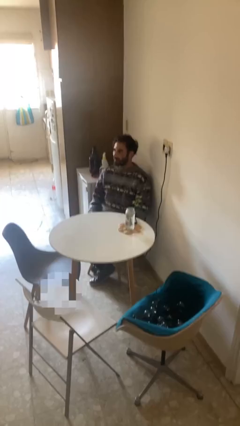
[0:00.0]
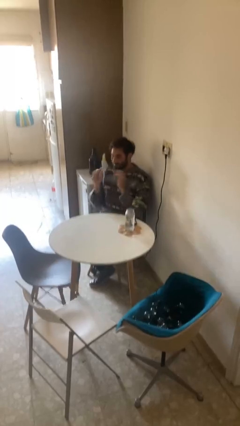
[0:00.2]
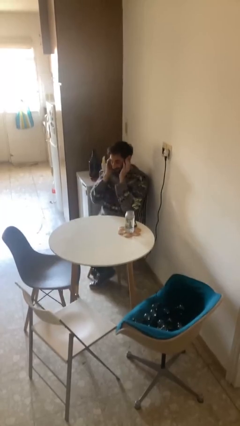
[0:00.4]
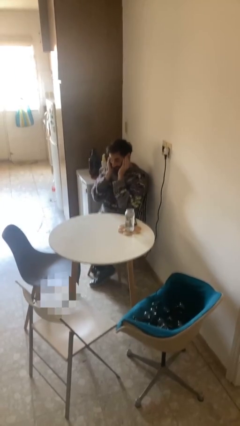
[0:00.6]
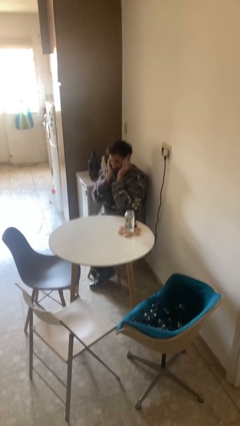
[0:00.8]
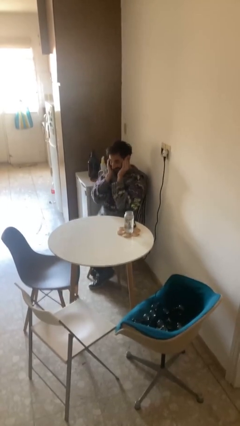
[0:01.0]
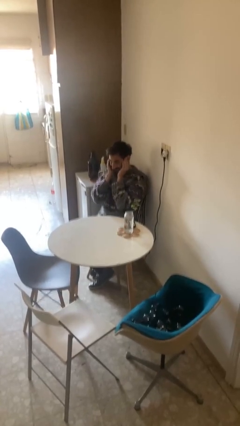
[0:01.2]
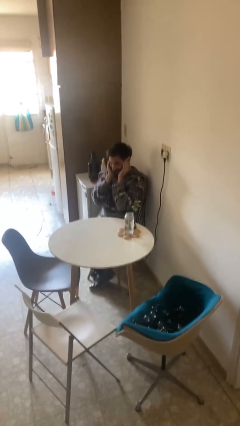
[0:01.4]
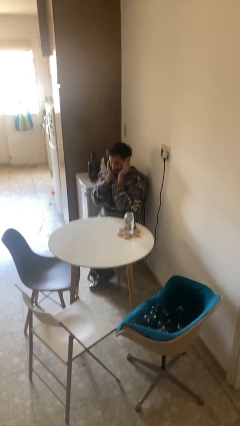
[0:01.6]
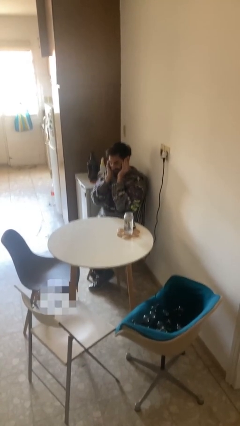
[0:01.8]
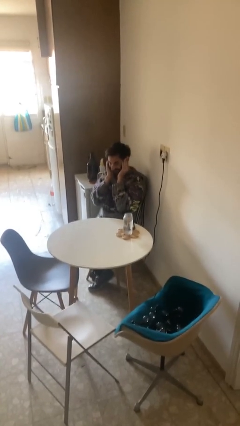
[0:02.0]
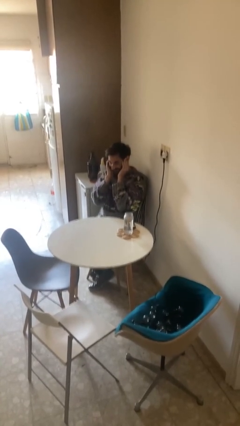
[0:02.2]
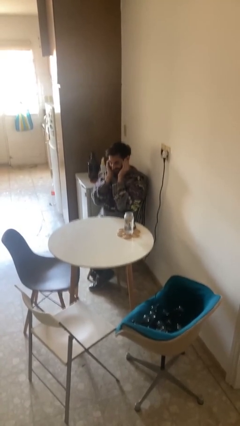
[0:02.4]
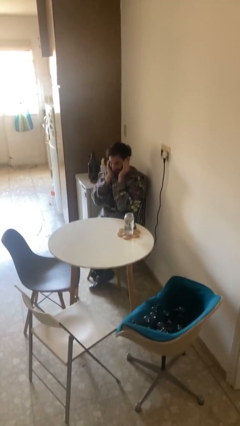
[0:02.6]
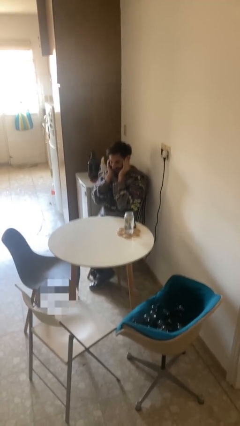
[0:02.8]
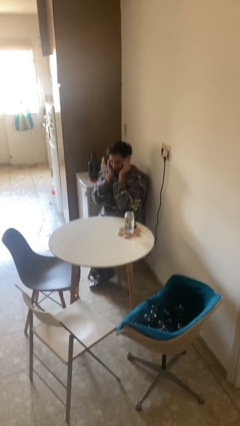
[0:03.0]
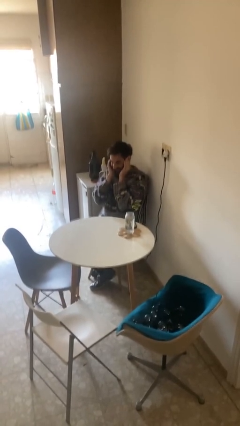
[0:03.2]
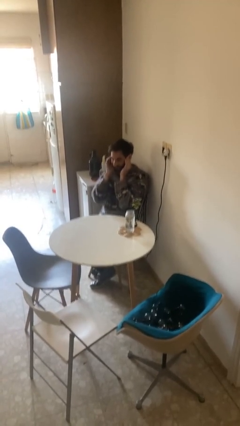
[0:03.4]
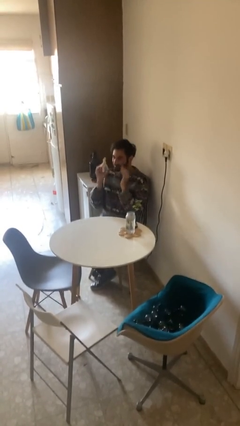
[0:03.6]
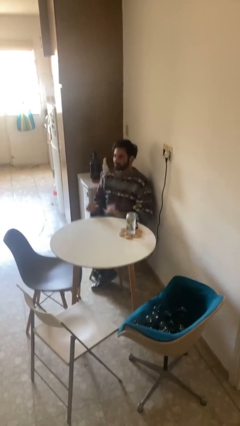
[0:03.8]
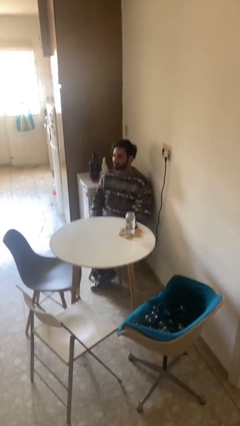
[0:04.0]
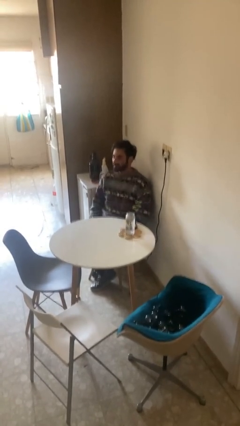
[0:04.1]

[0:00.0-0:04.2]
person puts fingers in ear

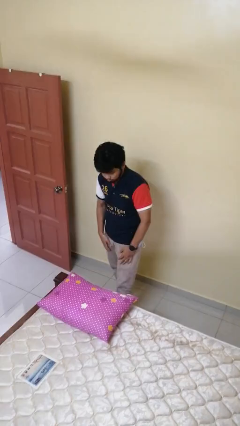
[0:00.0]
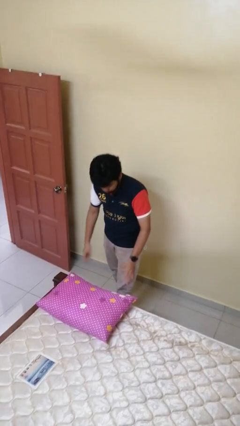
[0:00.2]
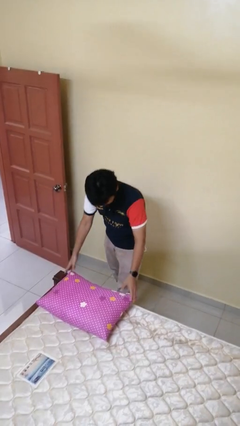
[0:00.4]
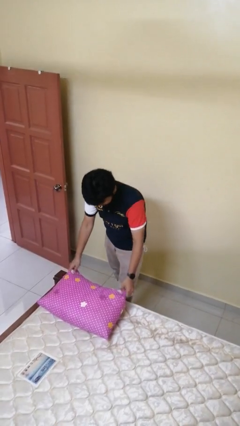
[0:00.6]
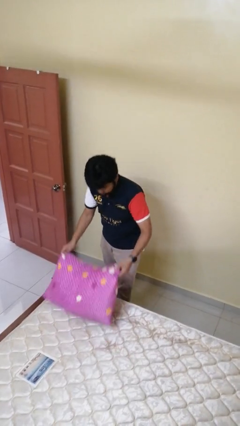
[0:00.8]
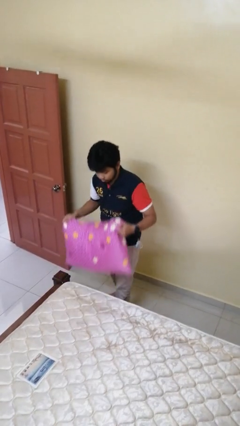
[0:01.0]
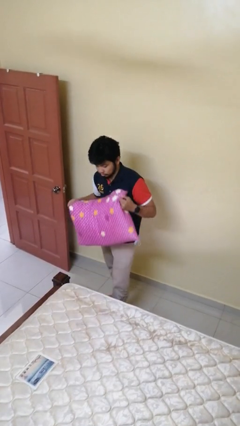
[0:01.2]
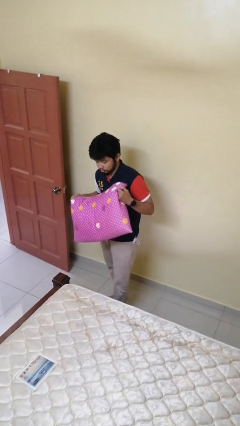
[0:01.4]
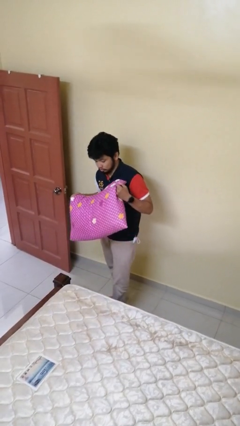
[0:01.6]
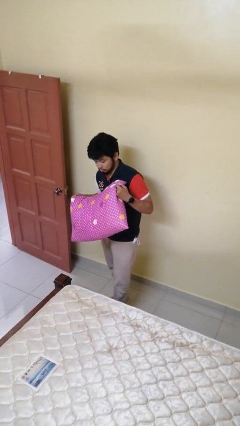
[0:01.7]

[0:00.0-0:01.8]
person picks up object from bed

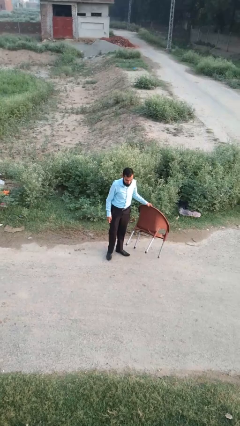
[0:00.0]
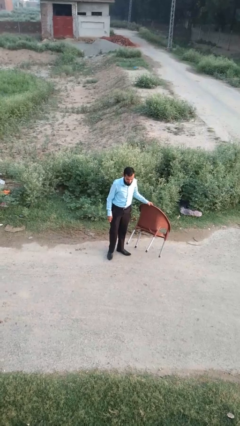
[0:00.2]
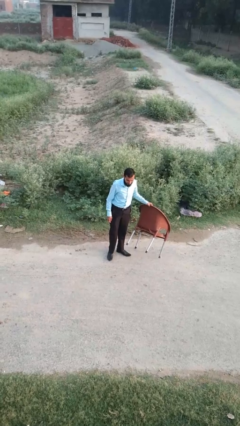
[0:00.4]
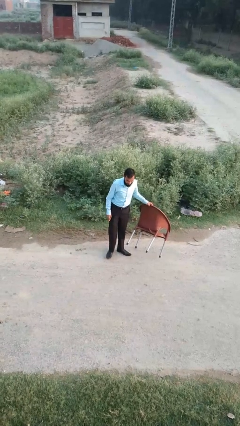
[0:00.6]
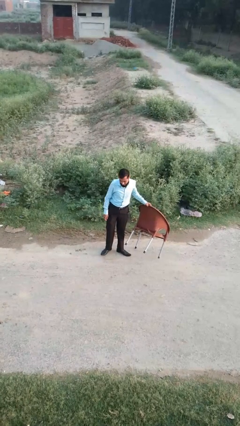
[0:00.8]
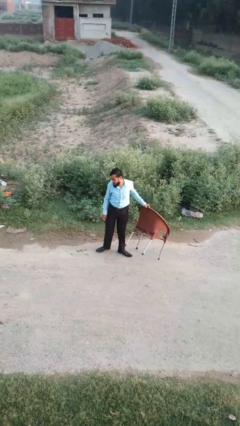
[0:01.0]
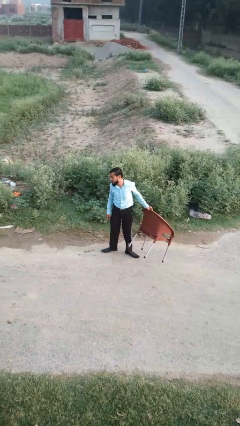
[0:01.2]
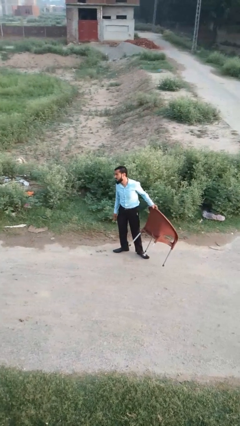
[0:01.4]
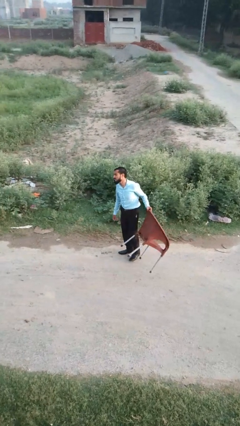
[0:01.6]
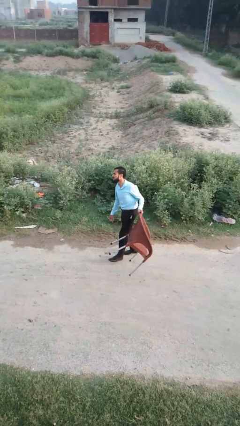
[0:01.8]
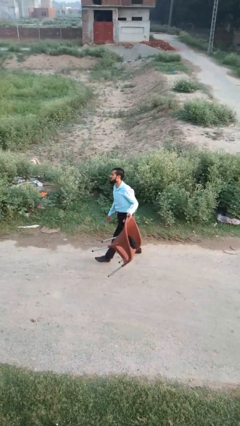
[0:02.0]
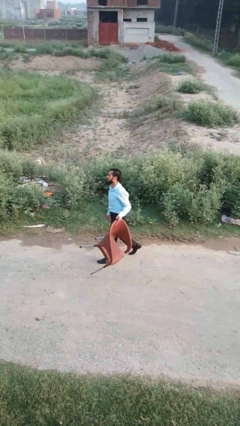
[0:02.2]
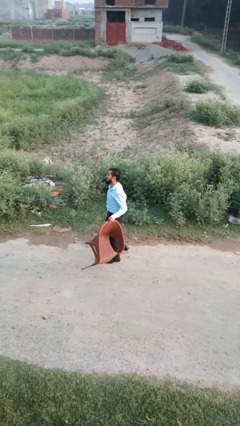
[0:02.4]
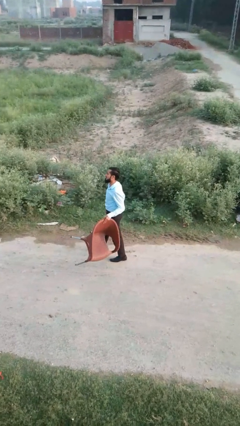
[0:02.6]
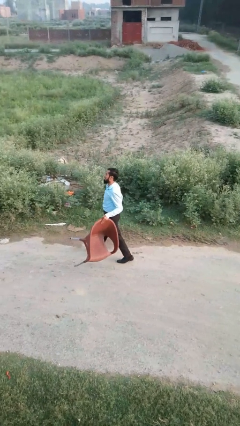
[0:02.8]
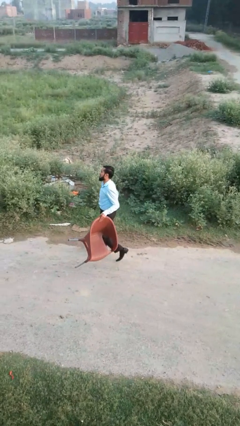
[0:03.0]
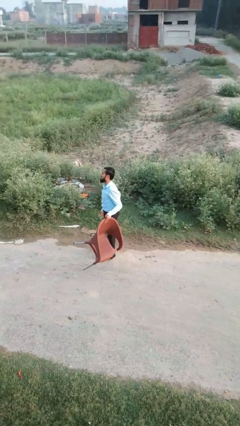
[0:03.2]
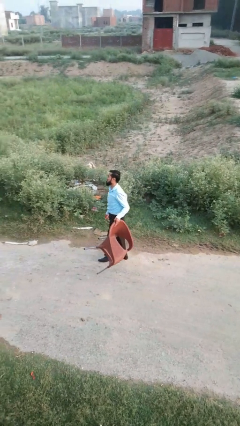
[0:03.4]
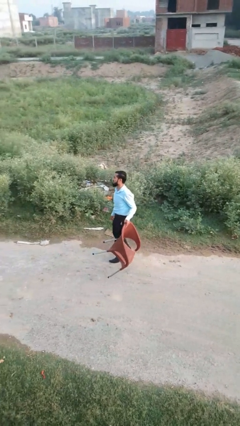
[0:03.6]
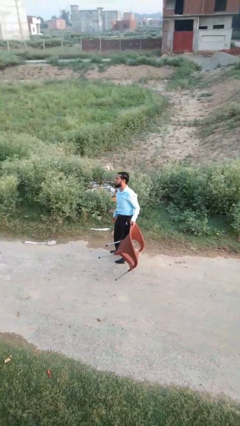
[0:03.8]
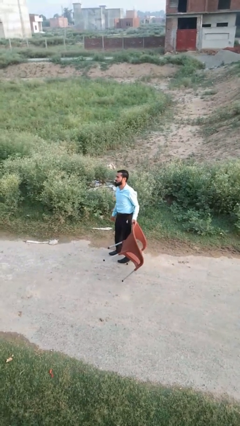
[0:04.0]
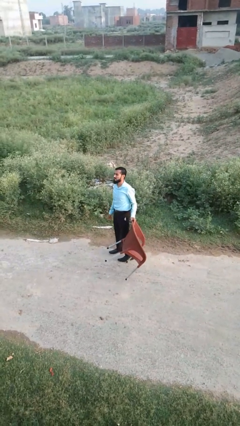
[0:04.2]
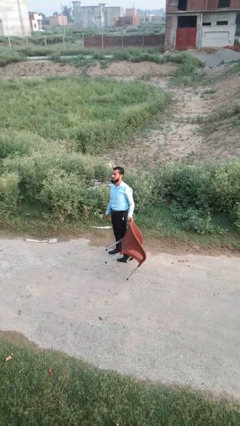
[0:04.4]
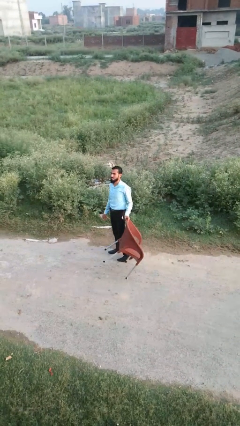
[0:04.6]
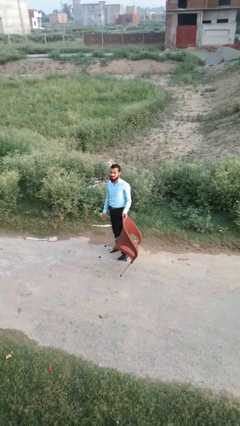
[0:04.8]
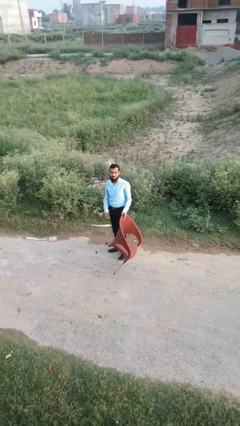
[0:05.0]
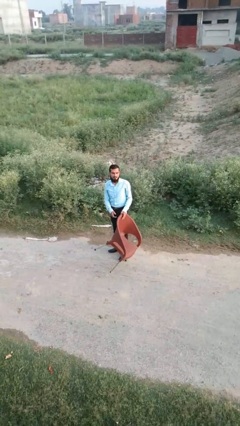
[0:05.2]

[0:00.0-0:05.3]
person carries furniture

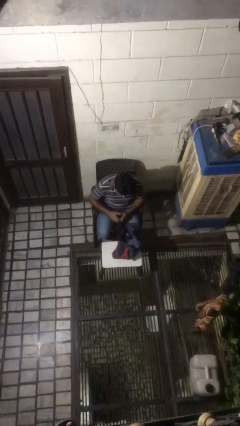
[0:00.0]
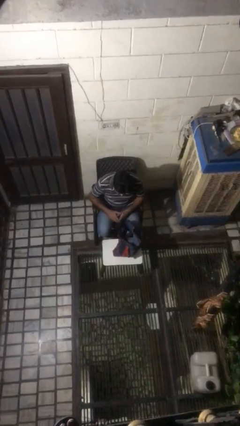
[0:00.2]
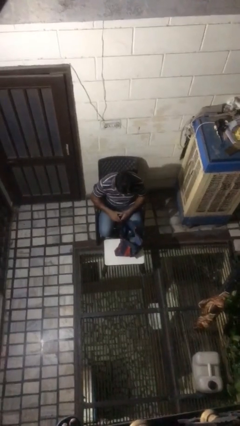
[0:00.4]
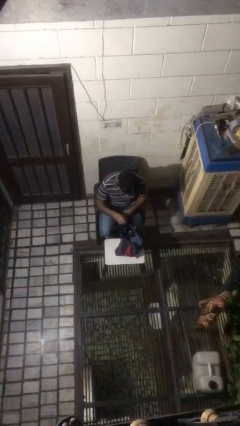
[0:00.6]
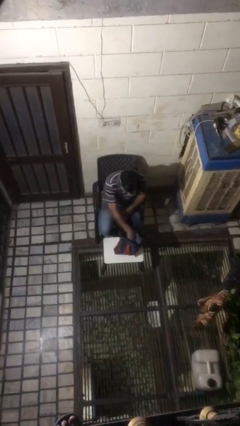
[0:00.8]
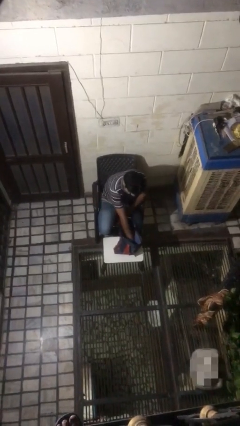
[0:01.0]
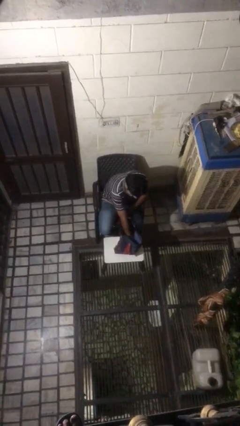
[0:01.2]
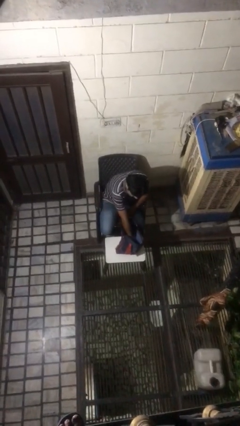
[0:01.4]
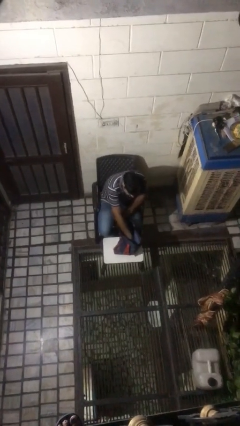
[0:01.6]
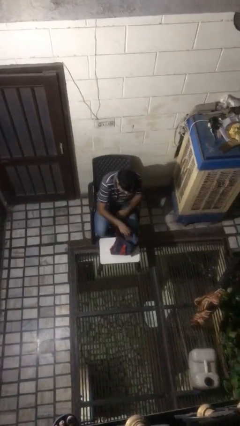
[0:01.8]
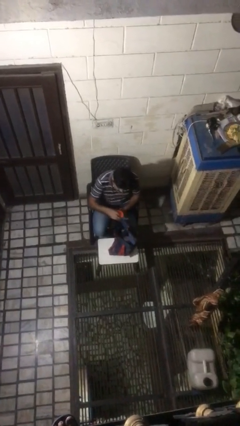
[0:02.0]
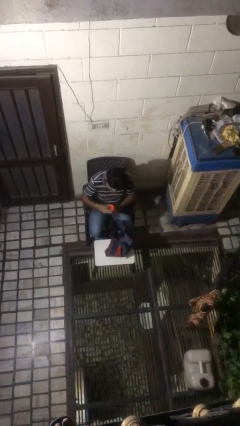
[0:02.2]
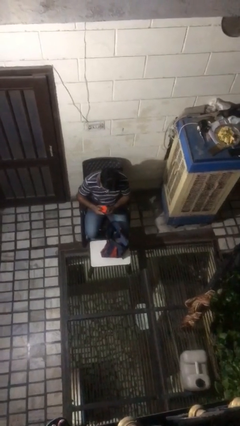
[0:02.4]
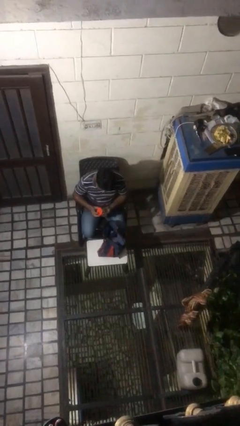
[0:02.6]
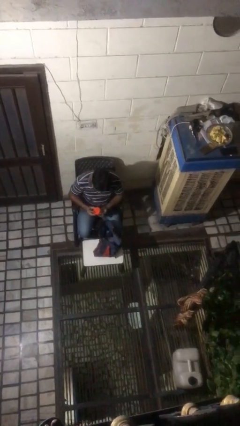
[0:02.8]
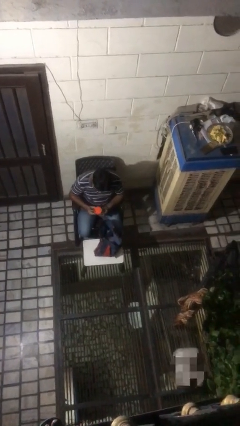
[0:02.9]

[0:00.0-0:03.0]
person takes object from bag

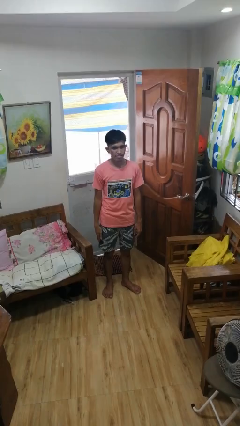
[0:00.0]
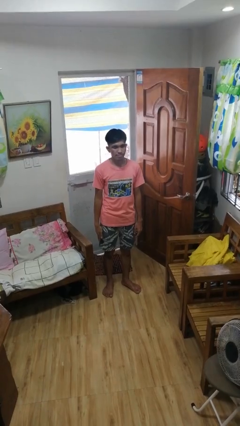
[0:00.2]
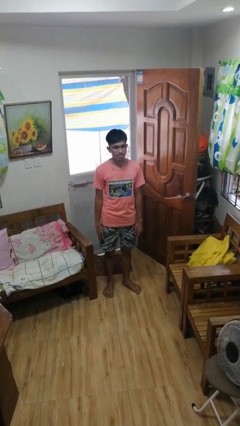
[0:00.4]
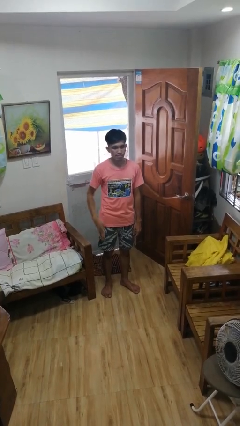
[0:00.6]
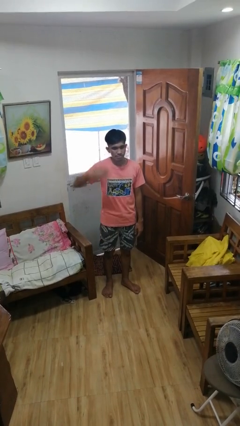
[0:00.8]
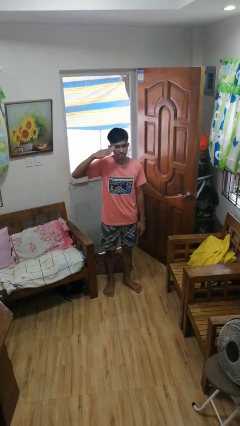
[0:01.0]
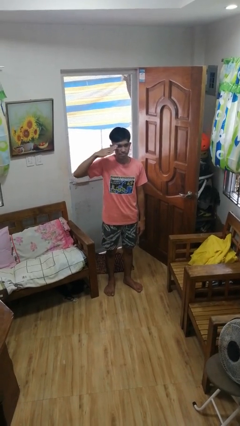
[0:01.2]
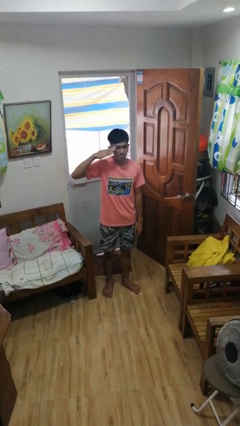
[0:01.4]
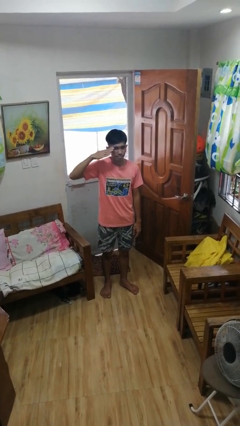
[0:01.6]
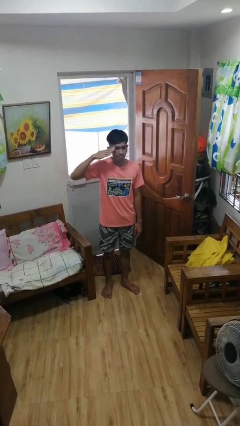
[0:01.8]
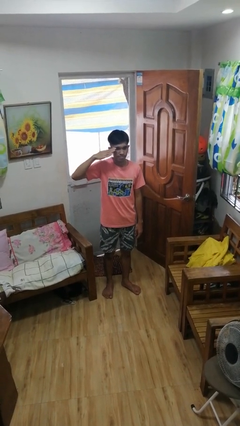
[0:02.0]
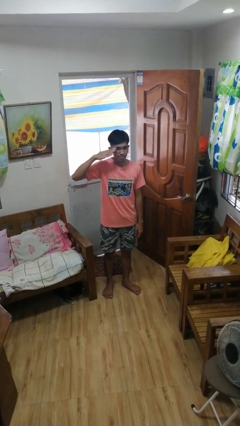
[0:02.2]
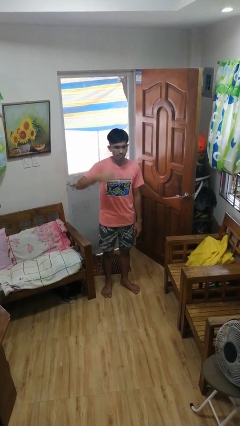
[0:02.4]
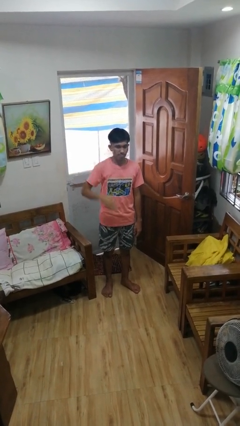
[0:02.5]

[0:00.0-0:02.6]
person salutes

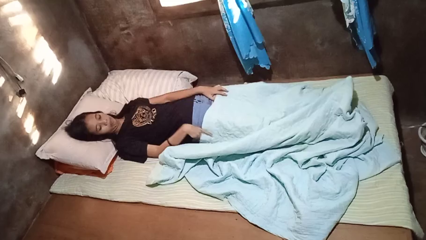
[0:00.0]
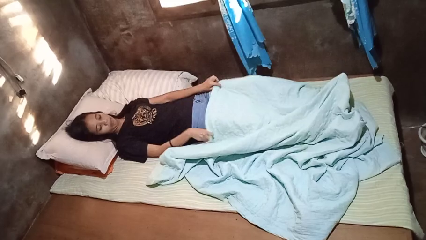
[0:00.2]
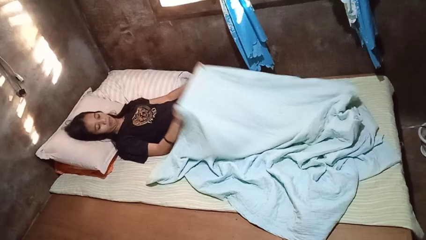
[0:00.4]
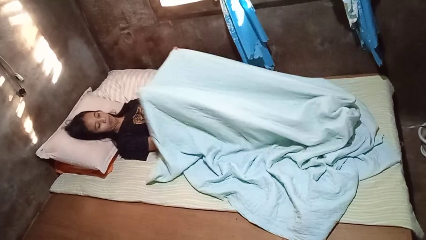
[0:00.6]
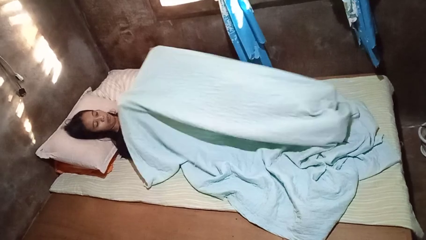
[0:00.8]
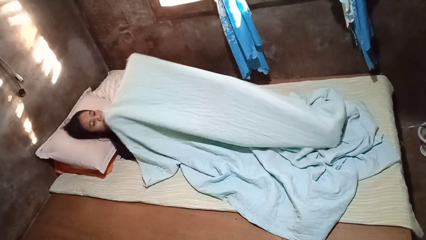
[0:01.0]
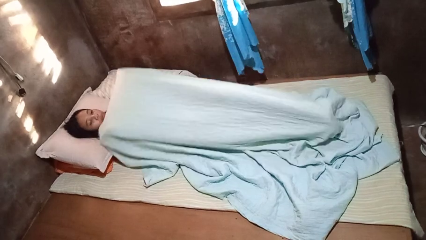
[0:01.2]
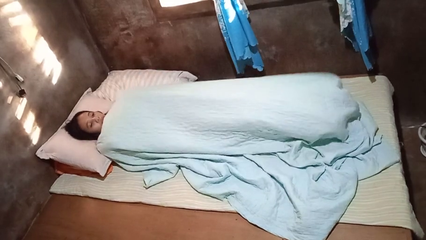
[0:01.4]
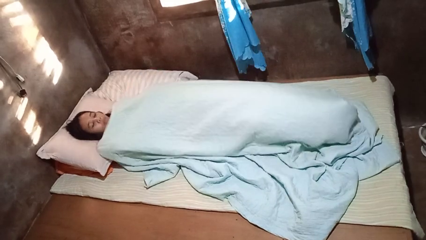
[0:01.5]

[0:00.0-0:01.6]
person covers with bedsheets
